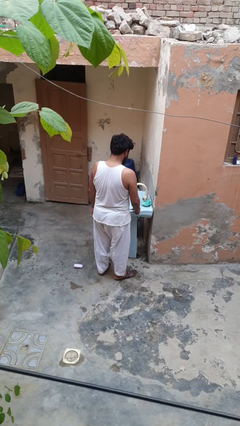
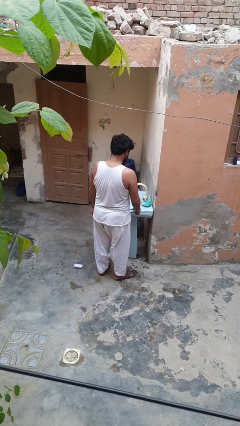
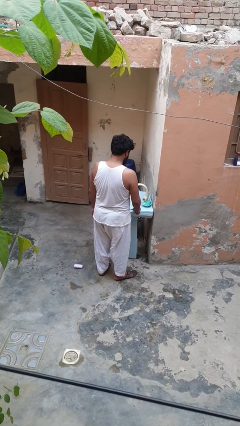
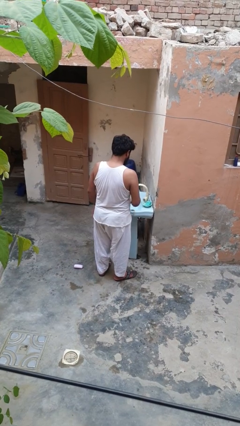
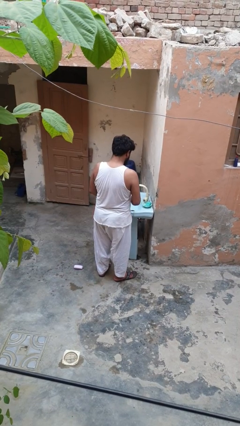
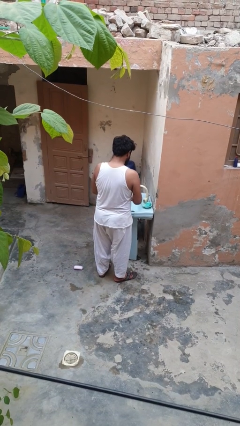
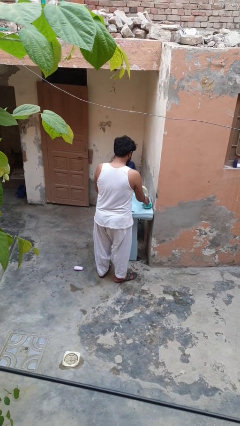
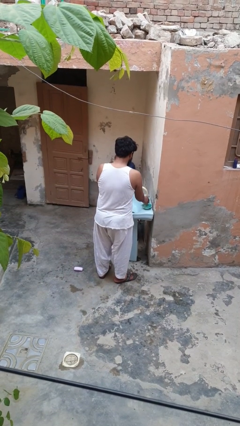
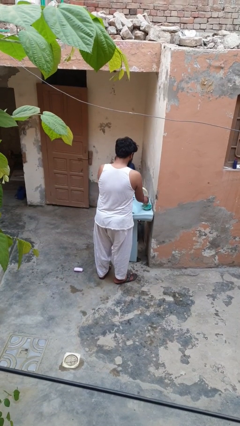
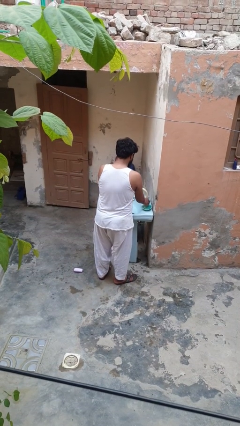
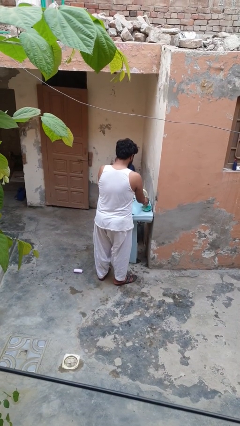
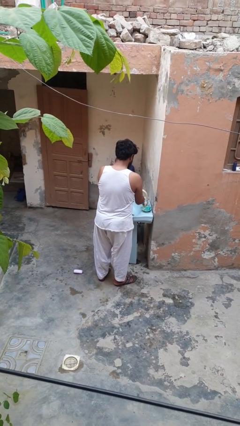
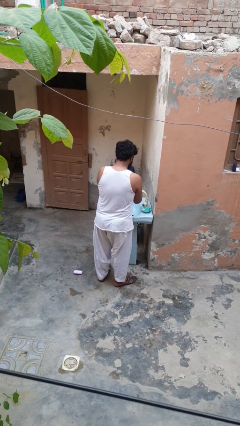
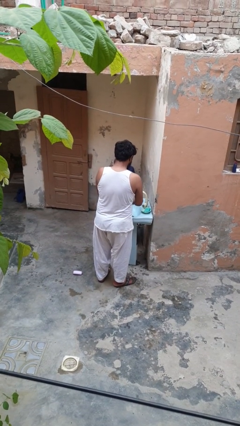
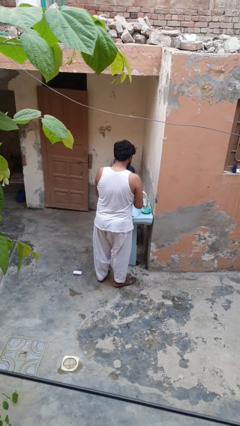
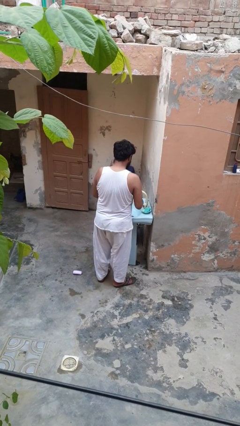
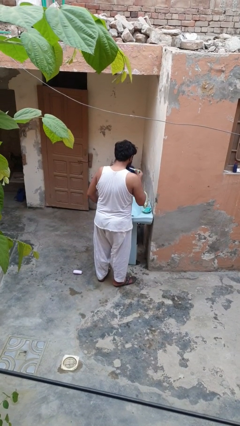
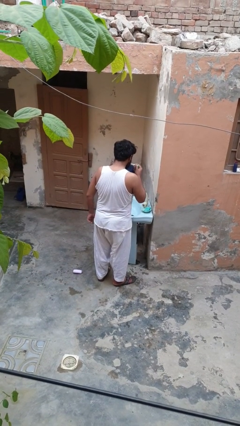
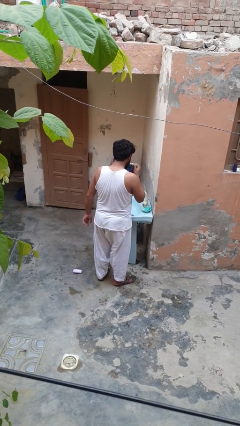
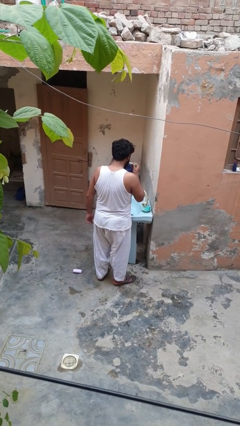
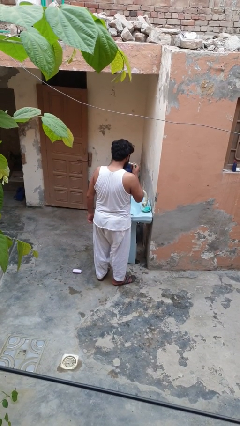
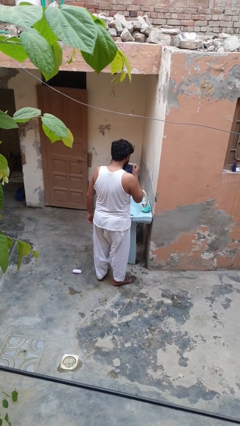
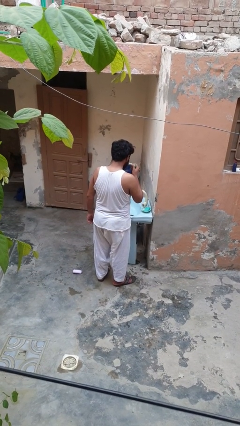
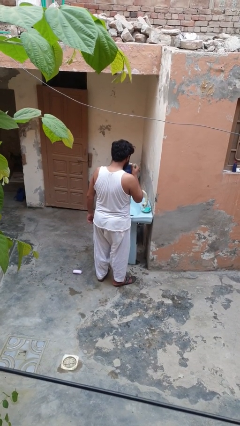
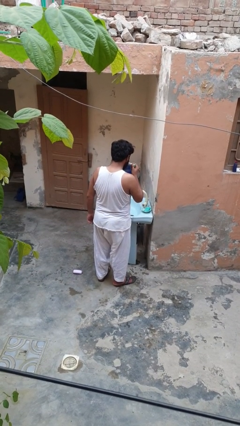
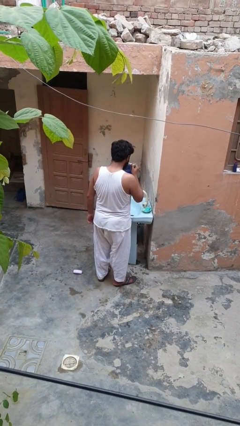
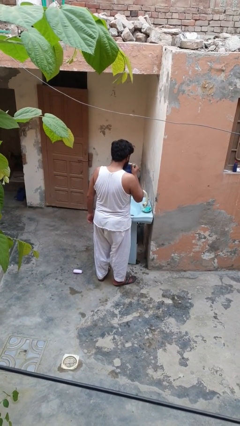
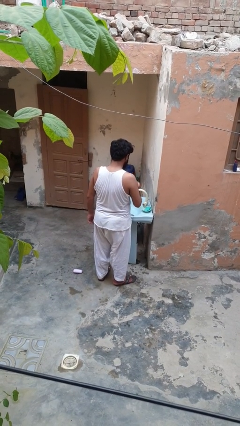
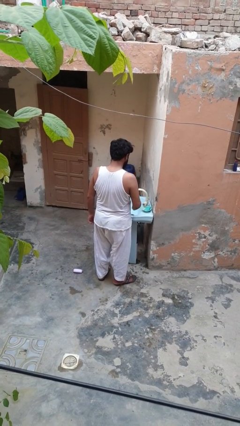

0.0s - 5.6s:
person brushes teeth

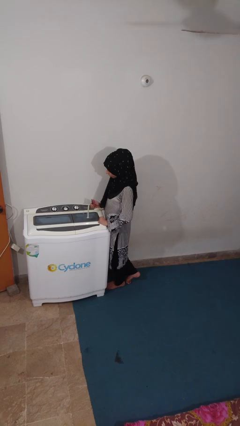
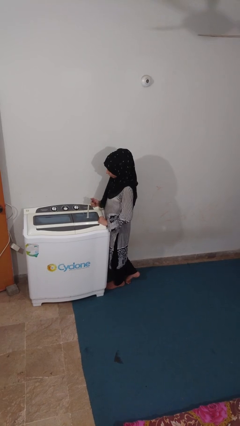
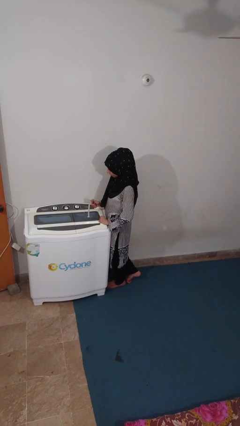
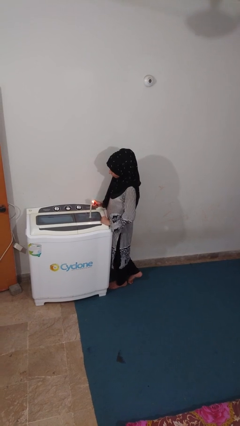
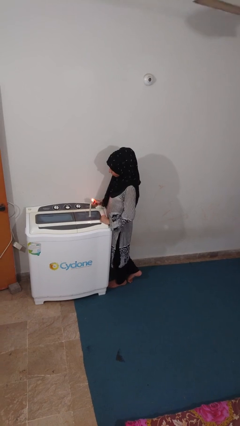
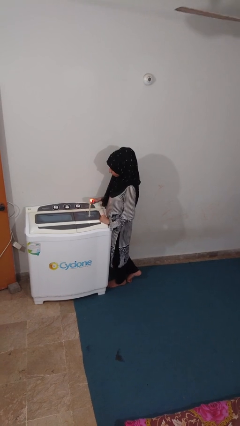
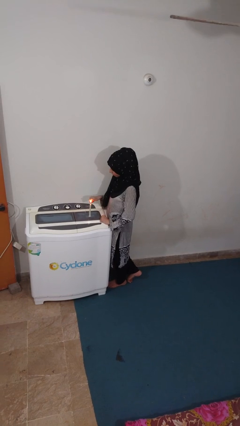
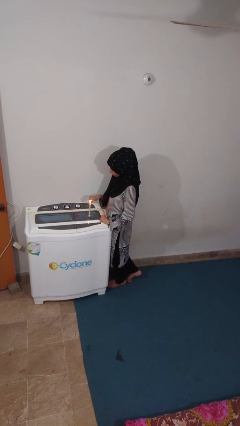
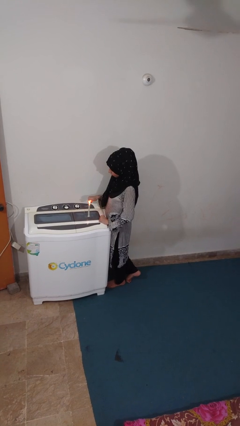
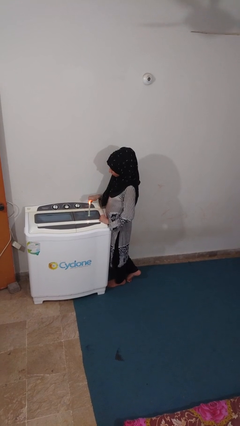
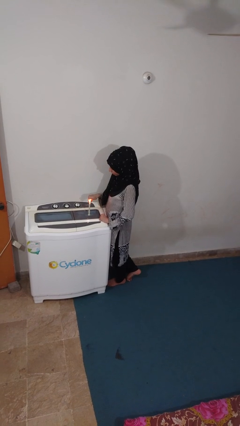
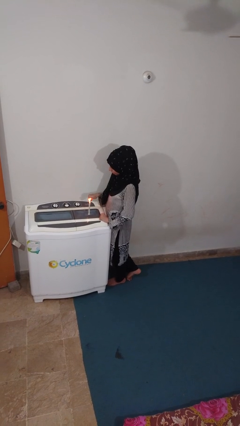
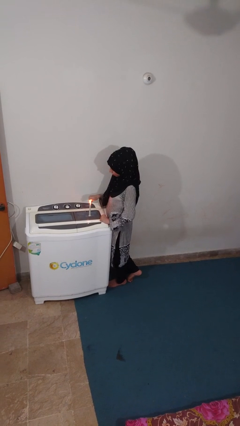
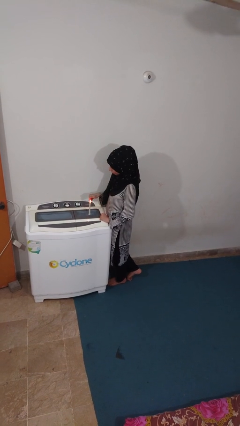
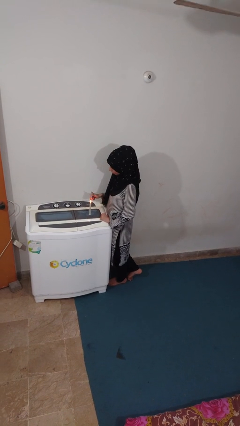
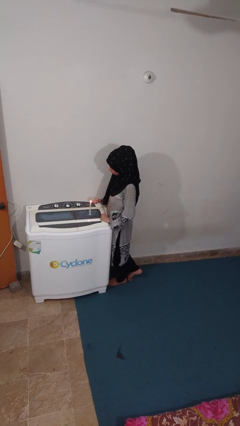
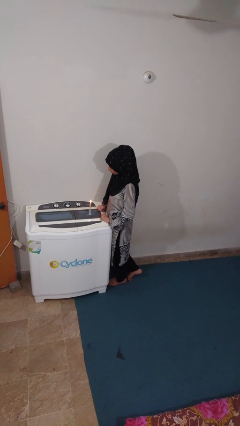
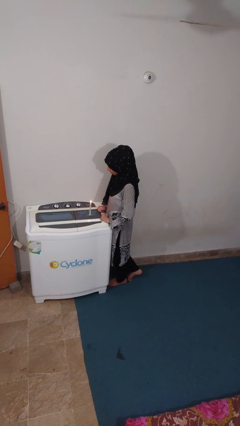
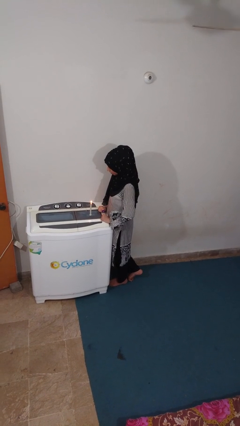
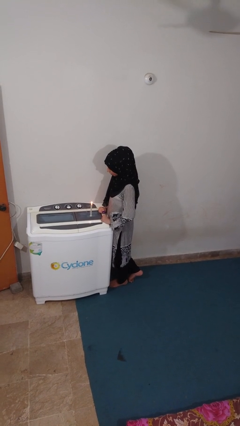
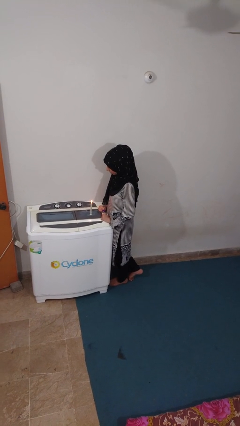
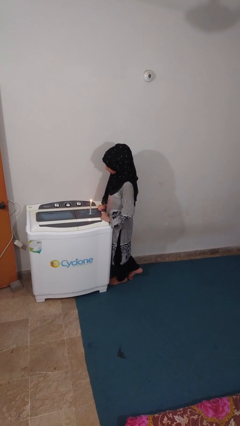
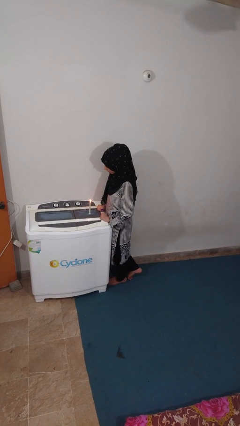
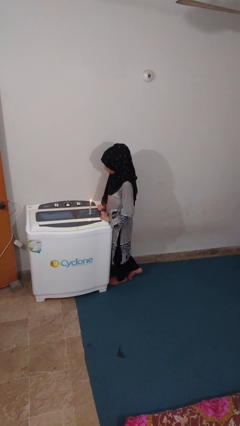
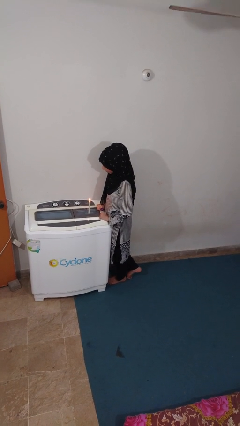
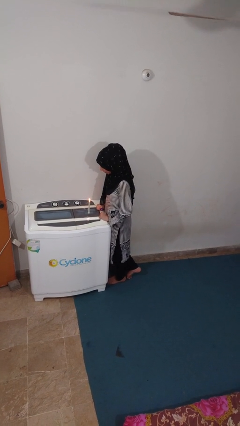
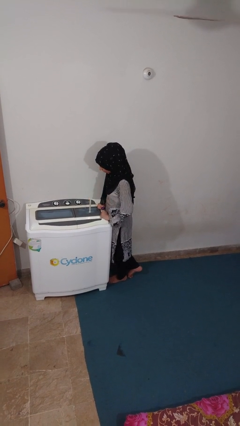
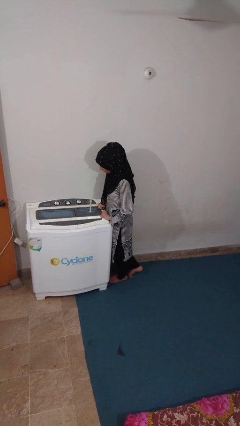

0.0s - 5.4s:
person lights candle

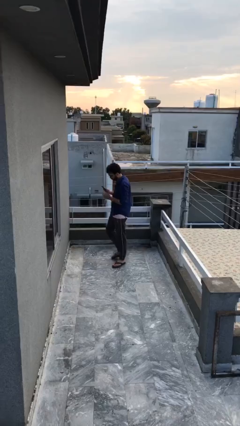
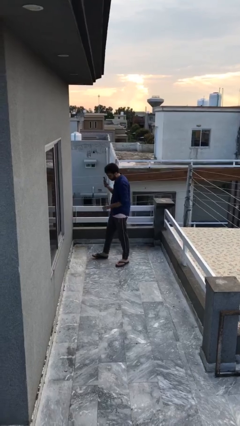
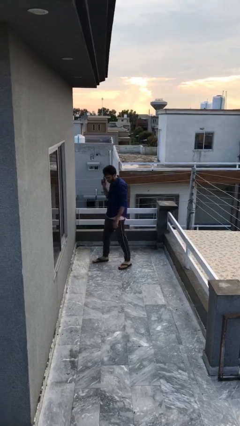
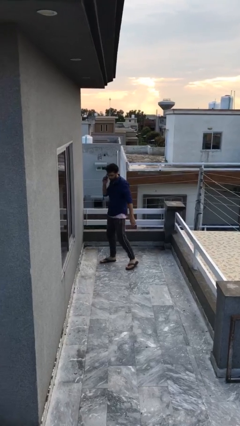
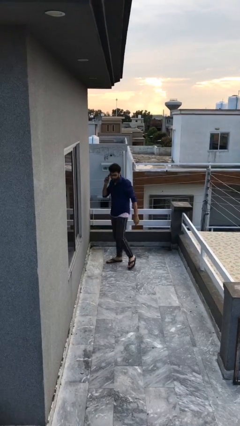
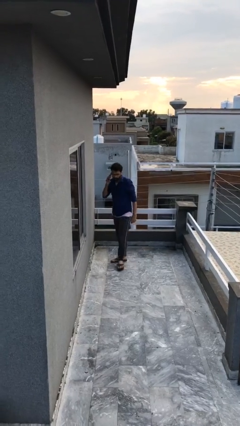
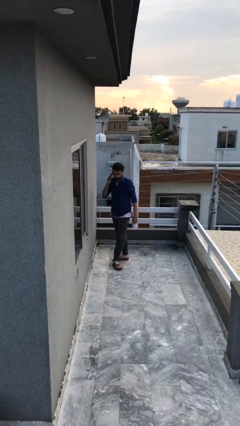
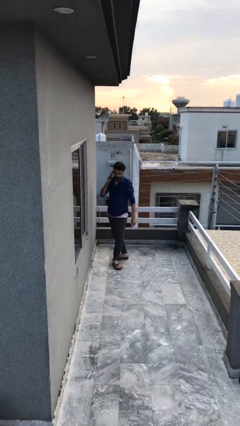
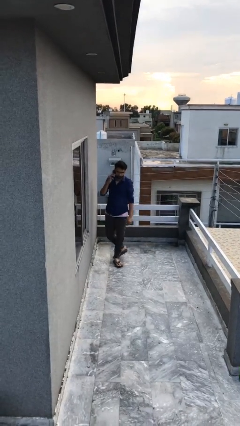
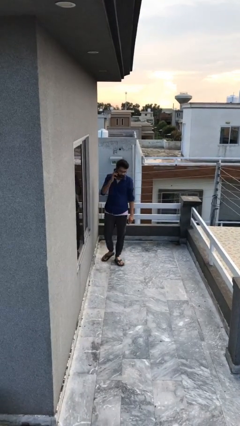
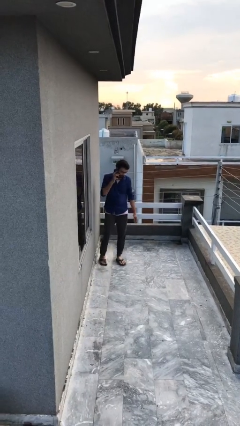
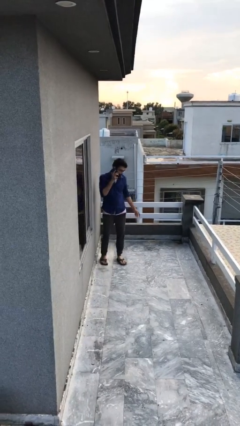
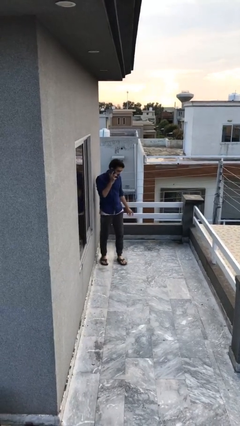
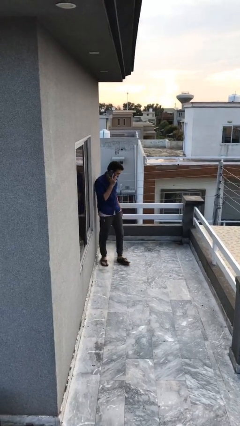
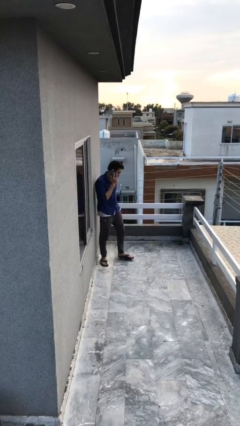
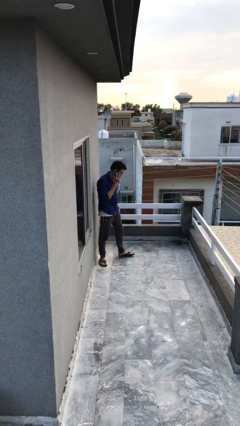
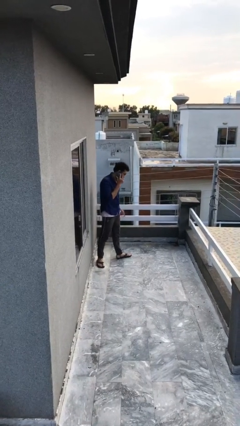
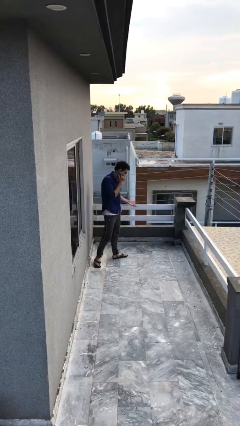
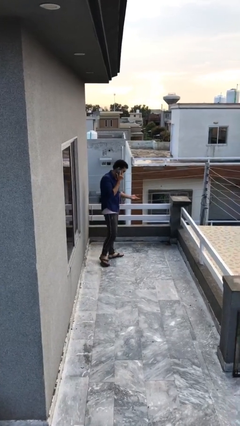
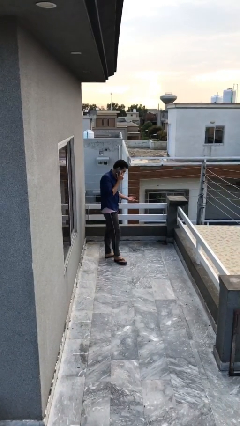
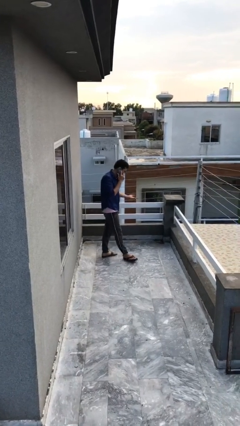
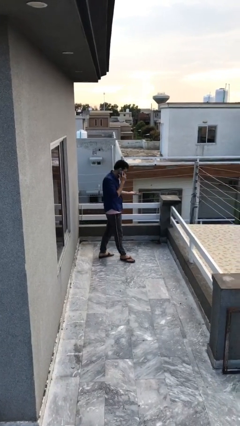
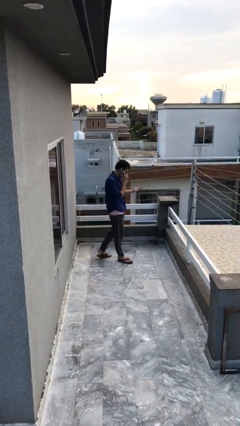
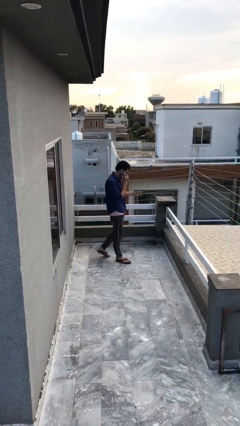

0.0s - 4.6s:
person talks on phone

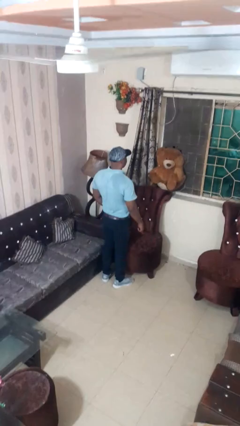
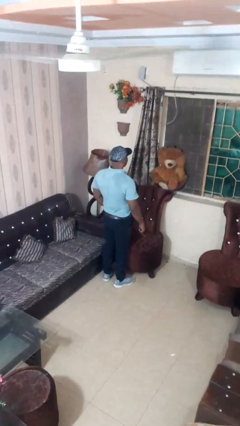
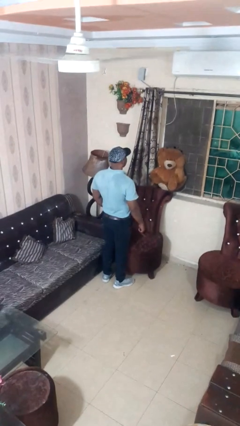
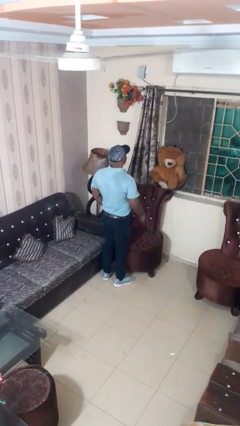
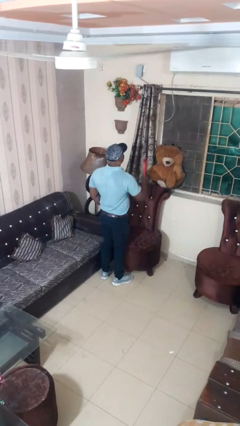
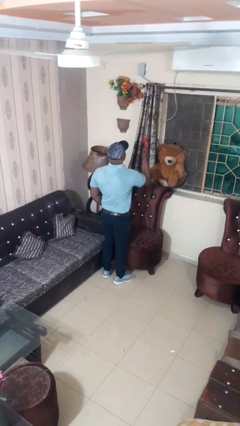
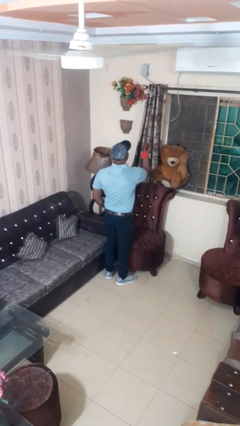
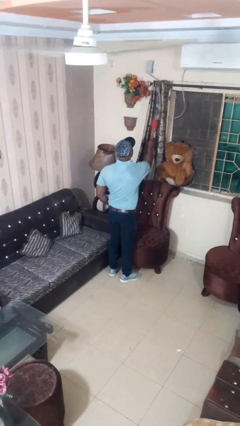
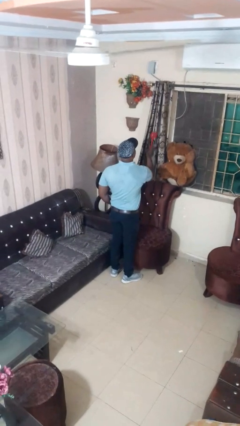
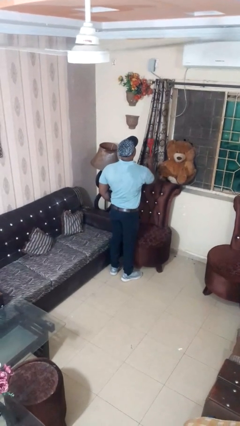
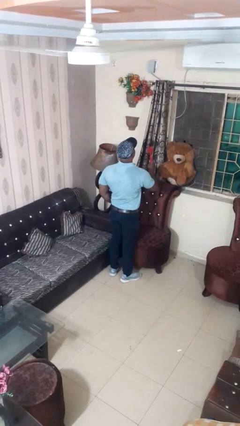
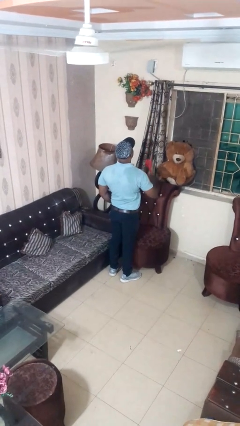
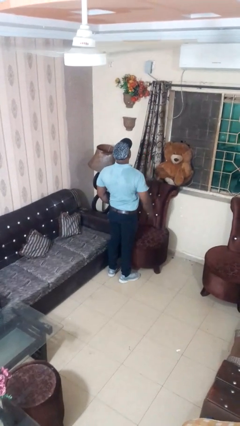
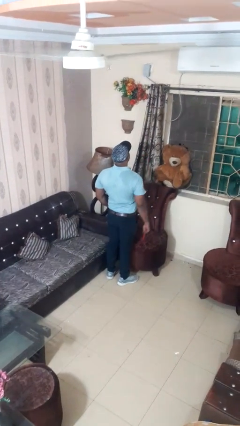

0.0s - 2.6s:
person swats bug
